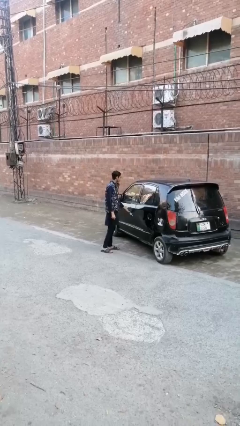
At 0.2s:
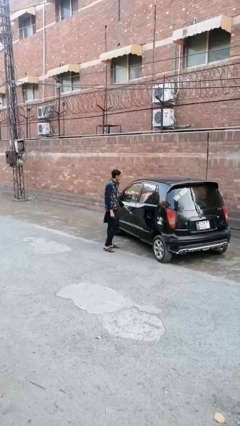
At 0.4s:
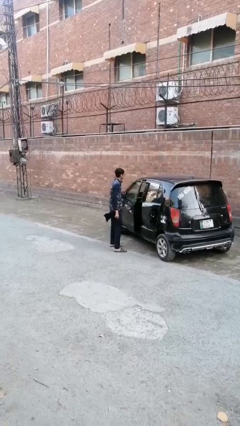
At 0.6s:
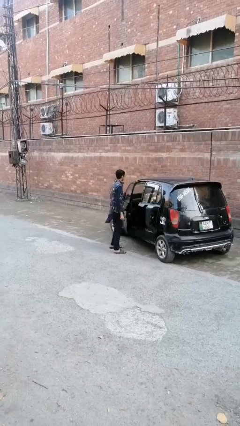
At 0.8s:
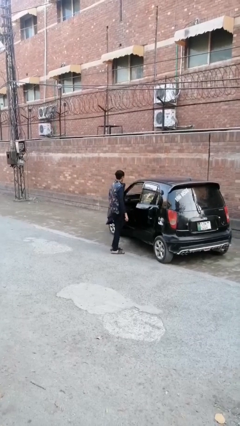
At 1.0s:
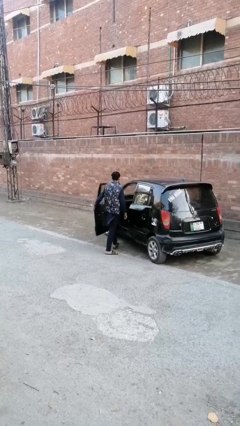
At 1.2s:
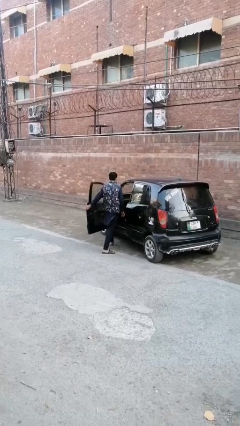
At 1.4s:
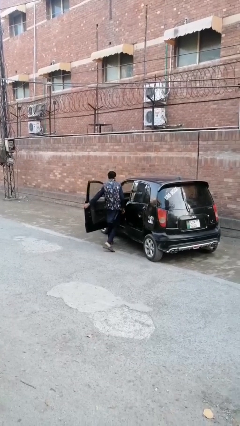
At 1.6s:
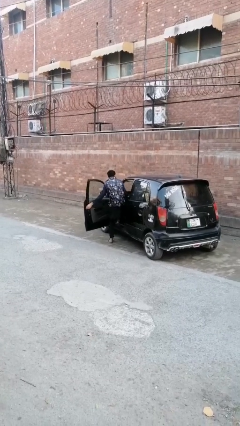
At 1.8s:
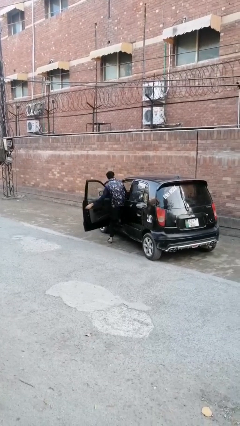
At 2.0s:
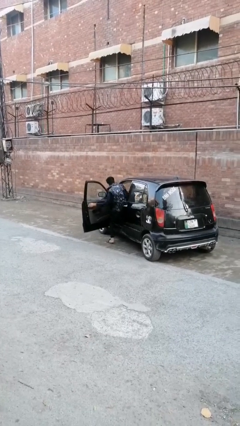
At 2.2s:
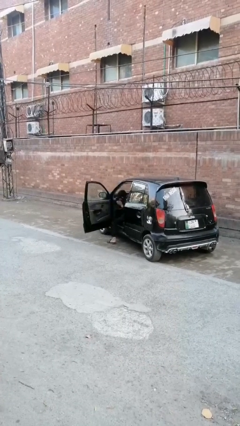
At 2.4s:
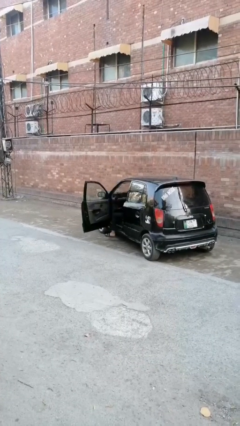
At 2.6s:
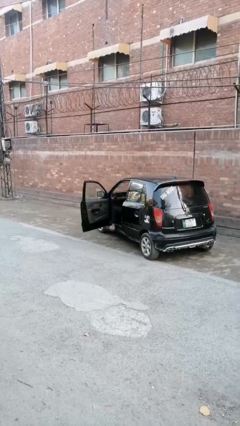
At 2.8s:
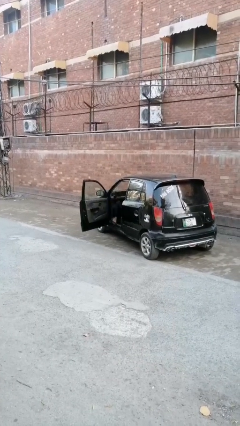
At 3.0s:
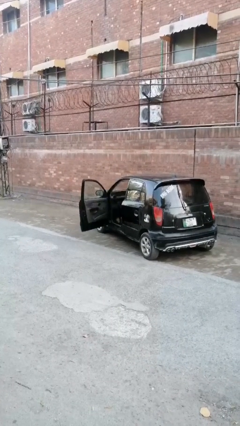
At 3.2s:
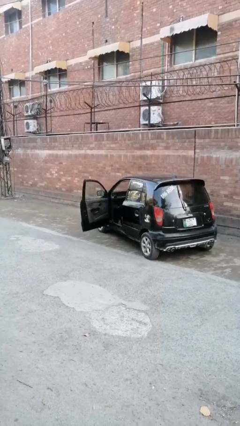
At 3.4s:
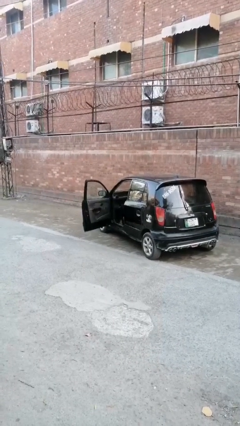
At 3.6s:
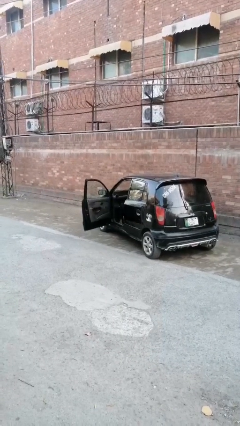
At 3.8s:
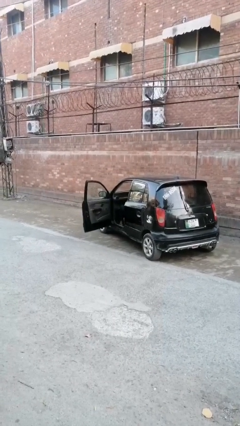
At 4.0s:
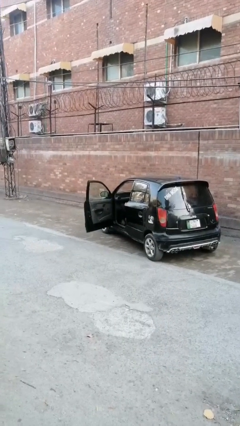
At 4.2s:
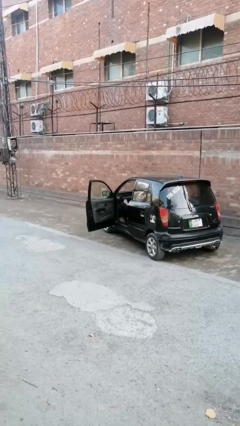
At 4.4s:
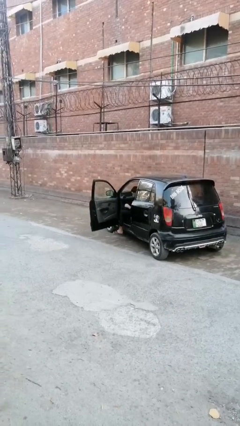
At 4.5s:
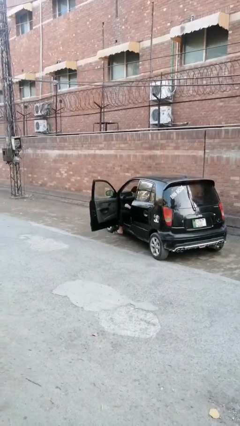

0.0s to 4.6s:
person enters car

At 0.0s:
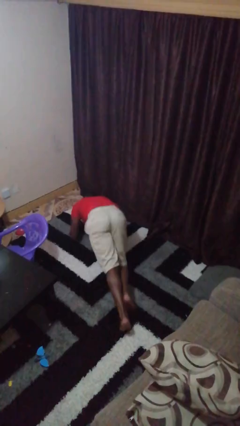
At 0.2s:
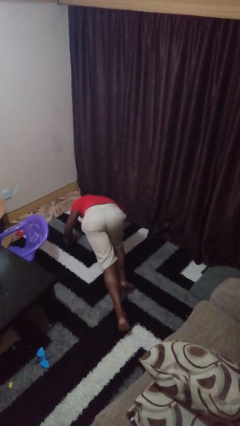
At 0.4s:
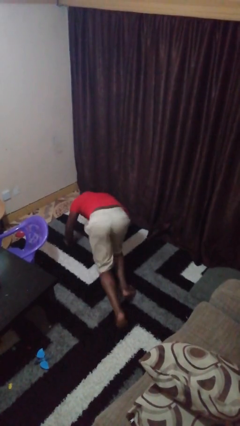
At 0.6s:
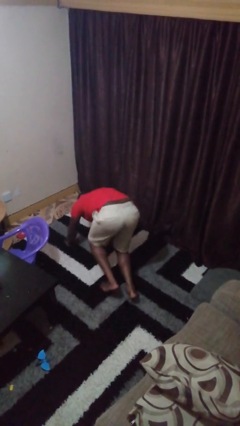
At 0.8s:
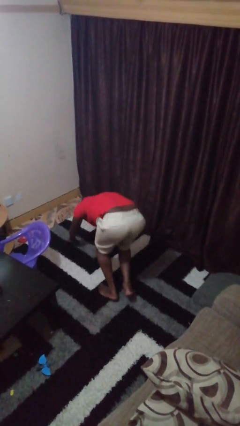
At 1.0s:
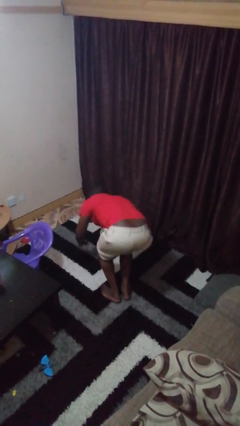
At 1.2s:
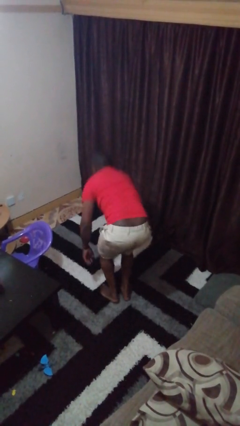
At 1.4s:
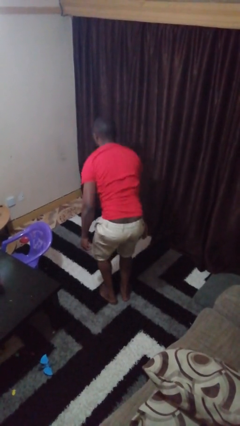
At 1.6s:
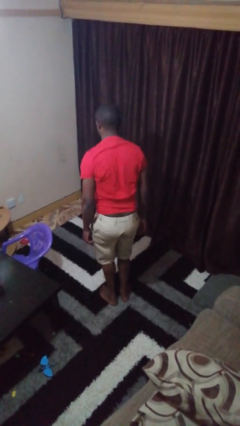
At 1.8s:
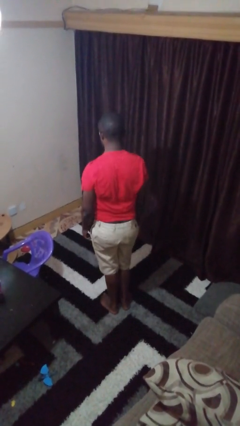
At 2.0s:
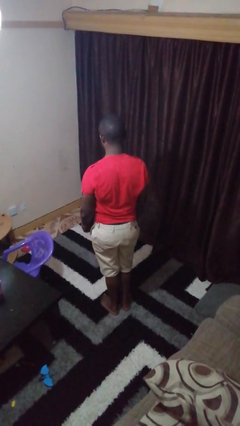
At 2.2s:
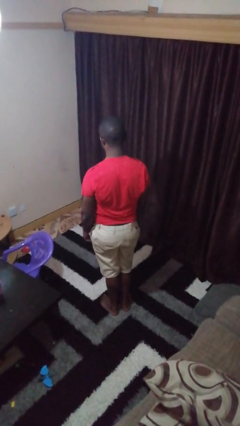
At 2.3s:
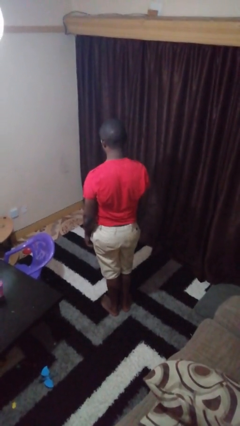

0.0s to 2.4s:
person stands up from floor

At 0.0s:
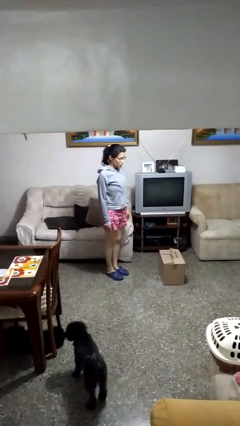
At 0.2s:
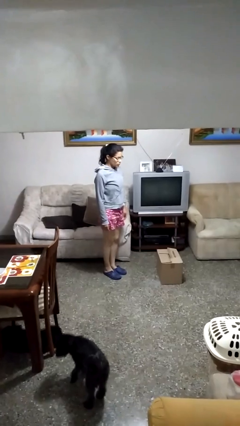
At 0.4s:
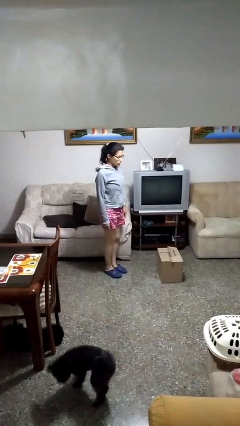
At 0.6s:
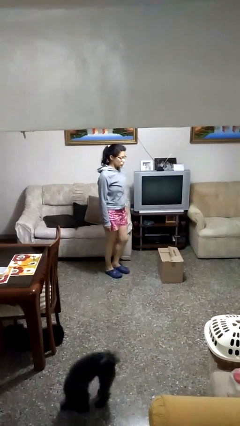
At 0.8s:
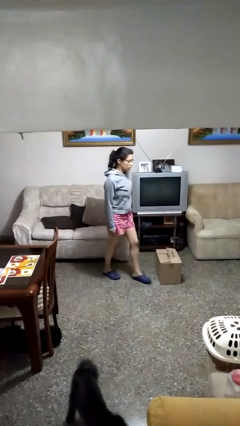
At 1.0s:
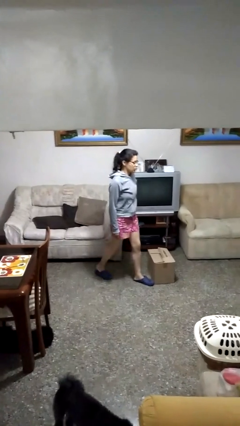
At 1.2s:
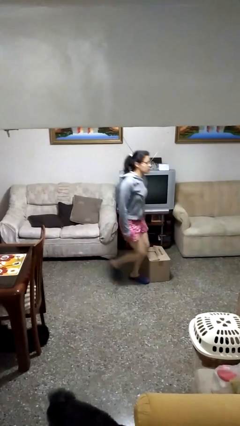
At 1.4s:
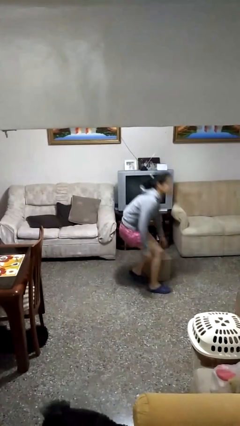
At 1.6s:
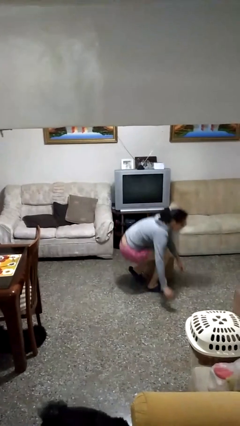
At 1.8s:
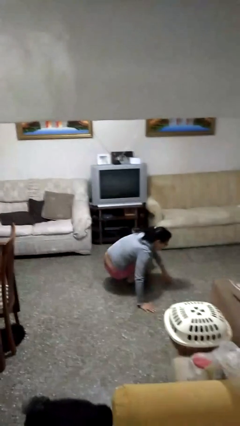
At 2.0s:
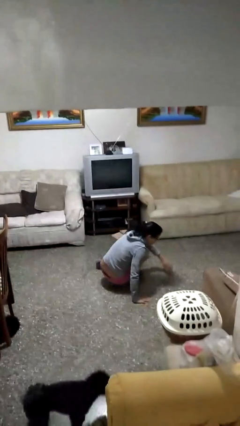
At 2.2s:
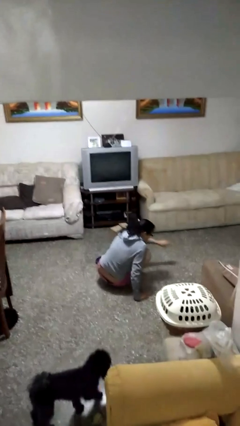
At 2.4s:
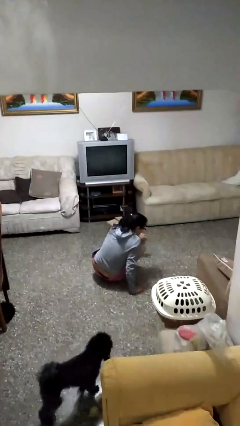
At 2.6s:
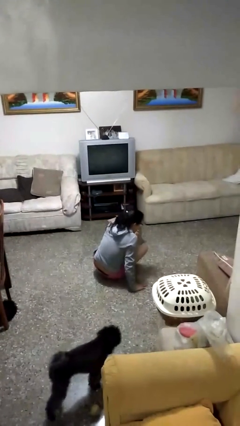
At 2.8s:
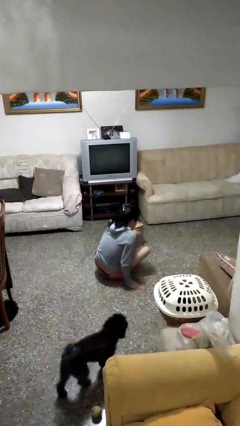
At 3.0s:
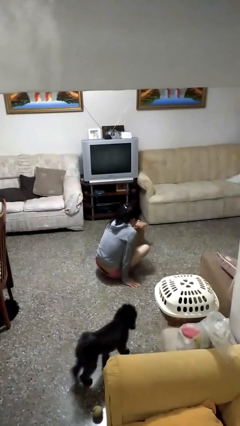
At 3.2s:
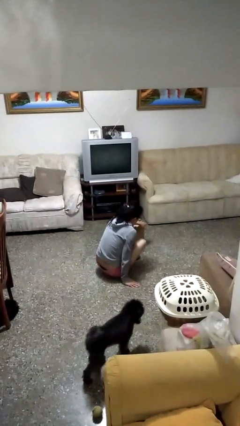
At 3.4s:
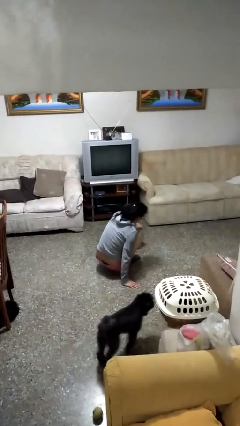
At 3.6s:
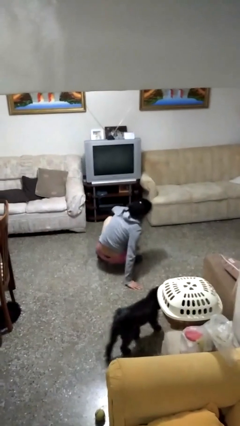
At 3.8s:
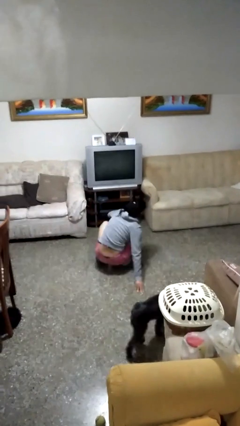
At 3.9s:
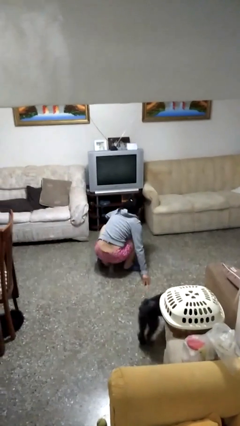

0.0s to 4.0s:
person trips on object on floor

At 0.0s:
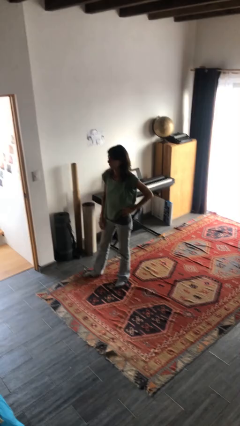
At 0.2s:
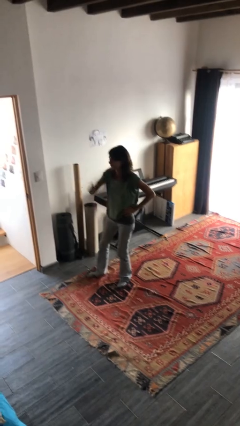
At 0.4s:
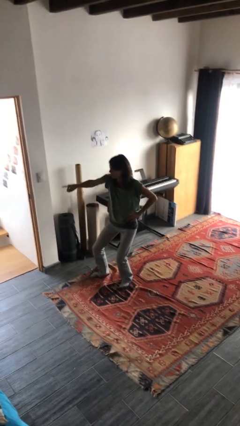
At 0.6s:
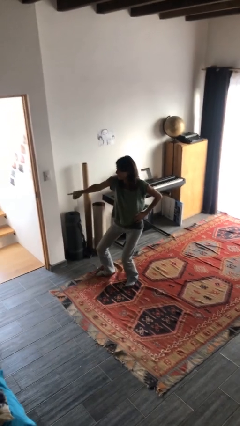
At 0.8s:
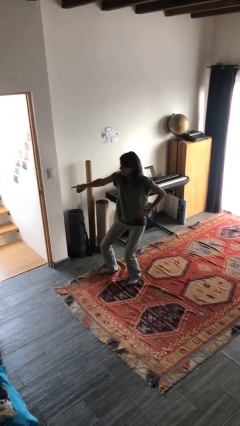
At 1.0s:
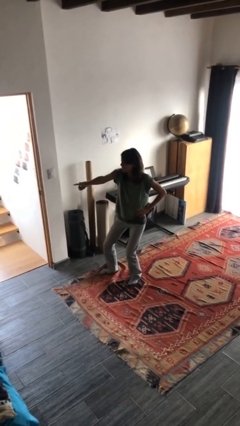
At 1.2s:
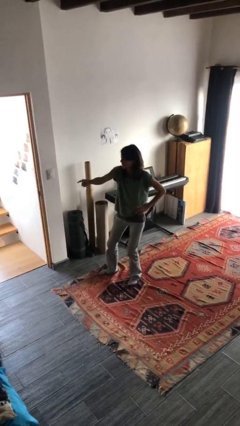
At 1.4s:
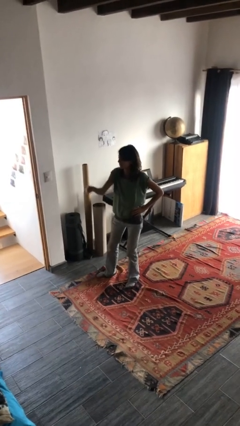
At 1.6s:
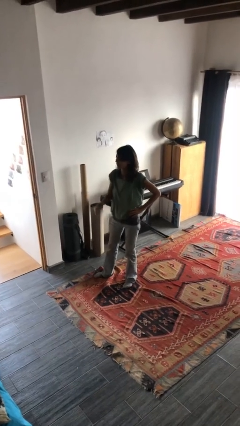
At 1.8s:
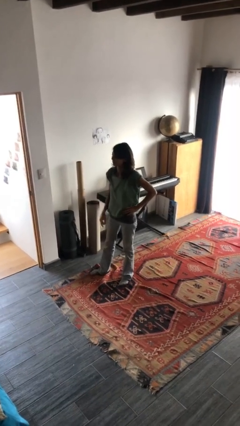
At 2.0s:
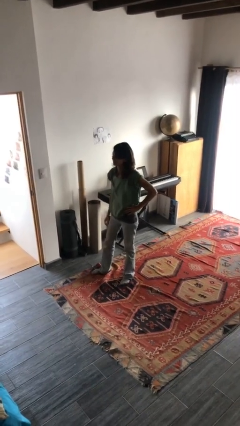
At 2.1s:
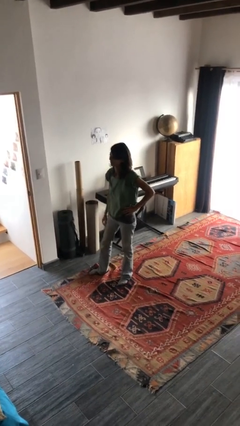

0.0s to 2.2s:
person points at person

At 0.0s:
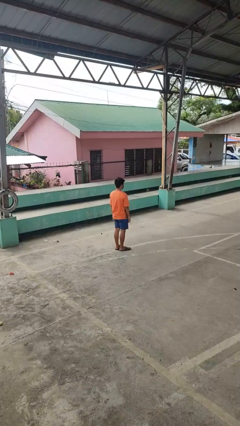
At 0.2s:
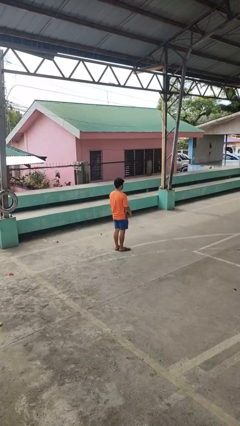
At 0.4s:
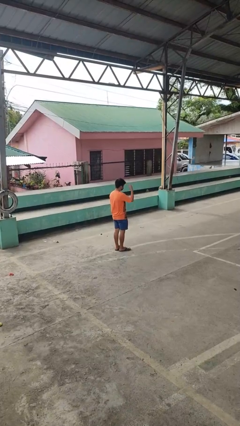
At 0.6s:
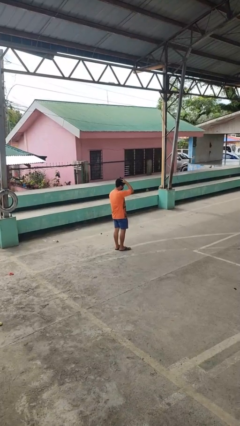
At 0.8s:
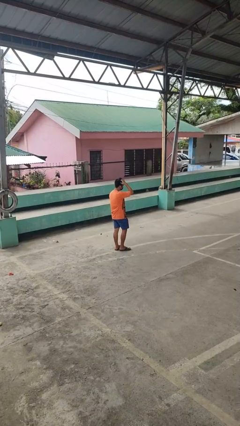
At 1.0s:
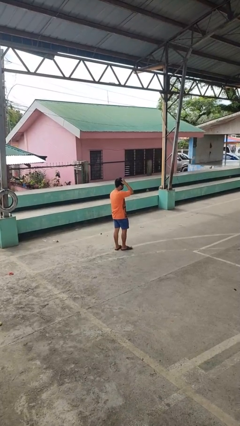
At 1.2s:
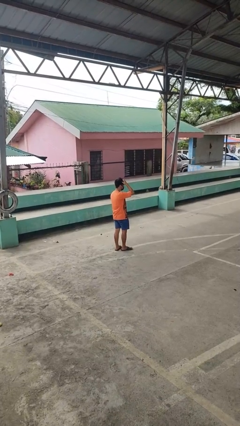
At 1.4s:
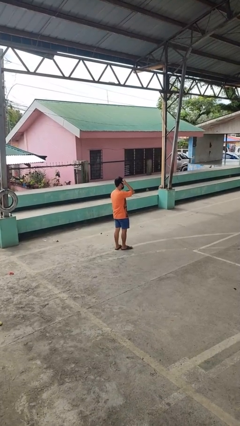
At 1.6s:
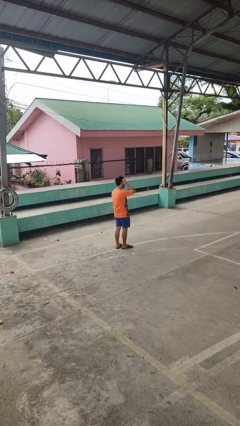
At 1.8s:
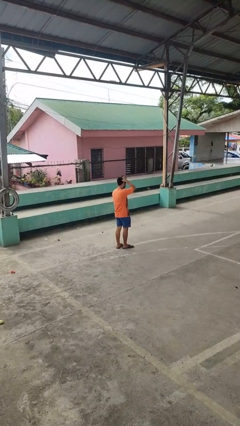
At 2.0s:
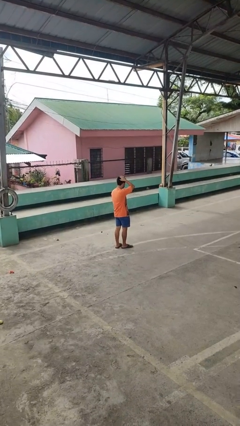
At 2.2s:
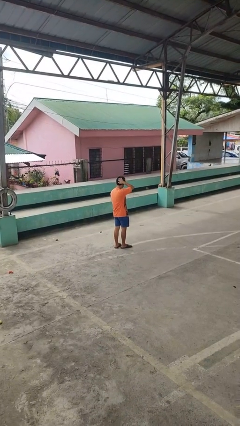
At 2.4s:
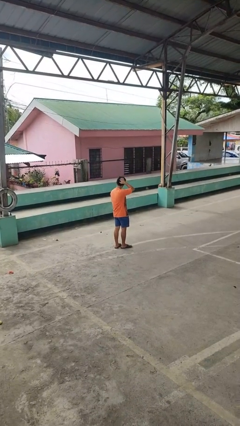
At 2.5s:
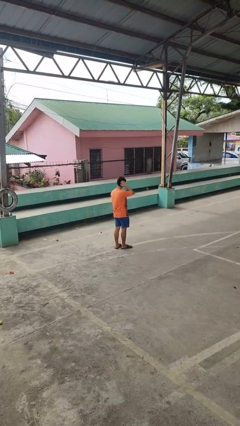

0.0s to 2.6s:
person scratches face

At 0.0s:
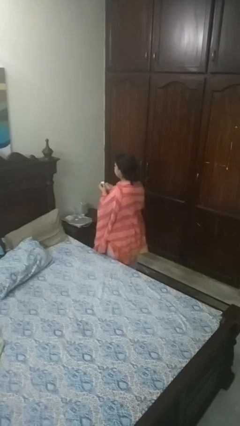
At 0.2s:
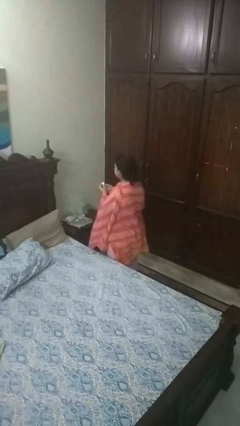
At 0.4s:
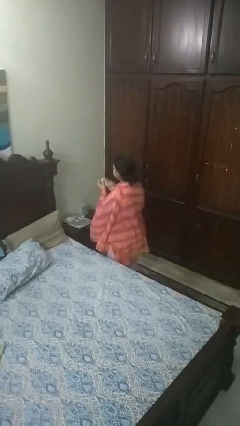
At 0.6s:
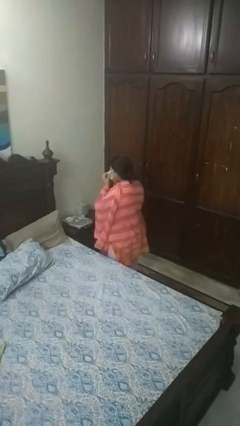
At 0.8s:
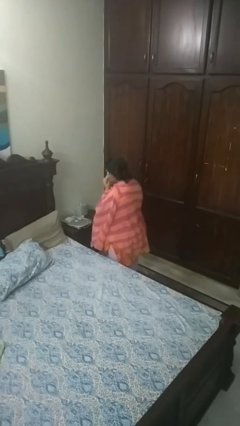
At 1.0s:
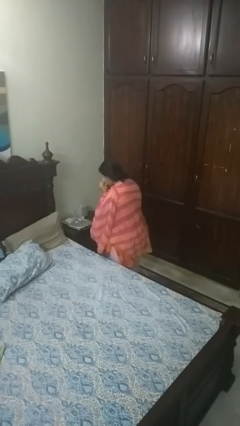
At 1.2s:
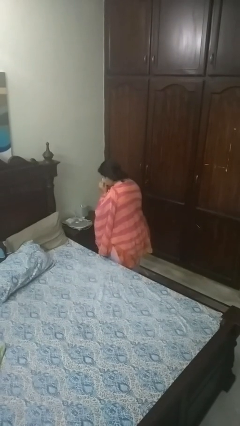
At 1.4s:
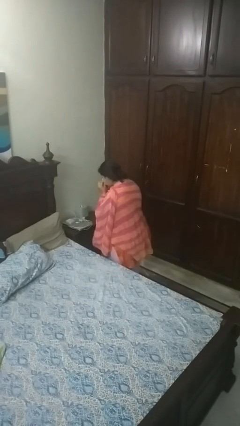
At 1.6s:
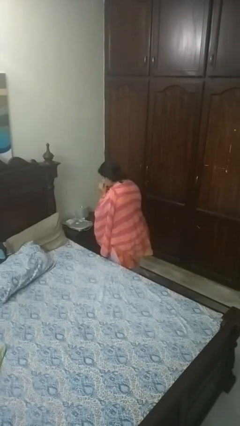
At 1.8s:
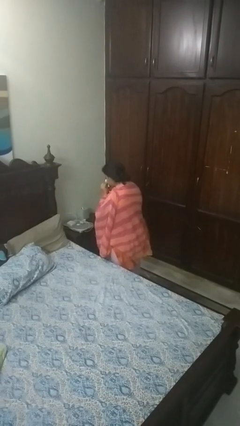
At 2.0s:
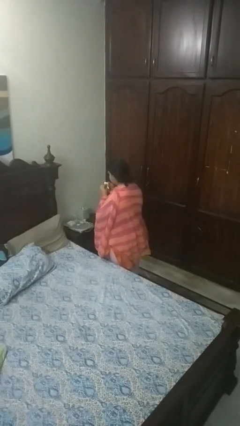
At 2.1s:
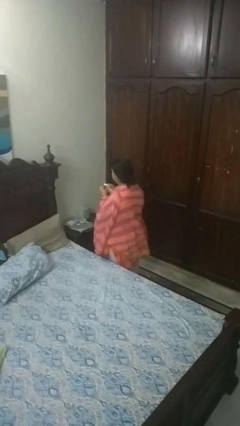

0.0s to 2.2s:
person blows nose
